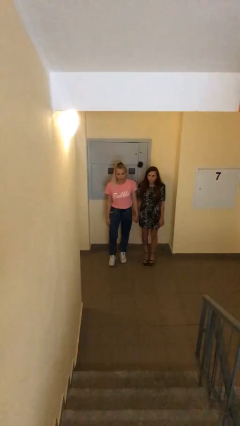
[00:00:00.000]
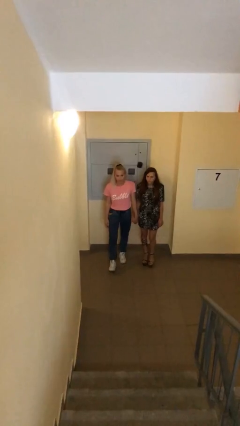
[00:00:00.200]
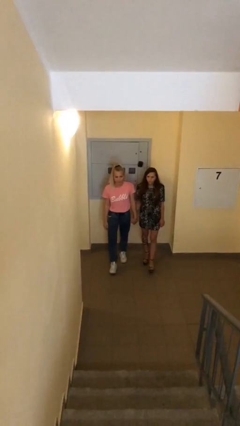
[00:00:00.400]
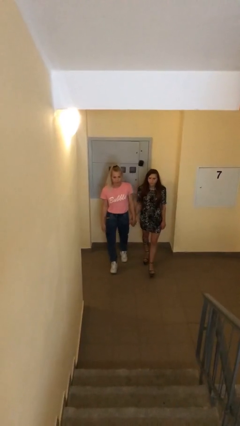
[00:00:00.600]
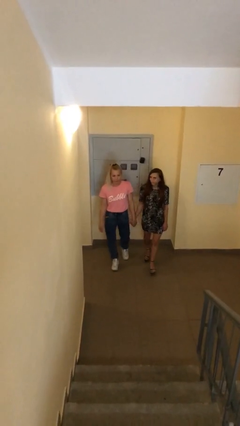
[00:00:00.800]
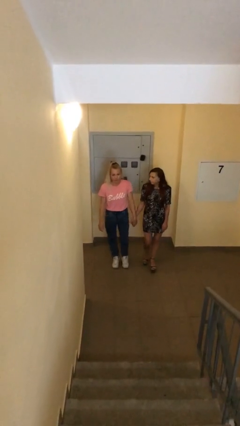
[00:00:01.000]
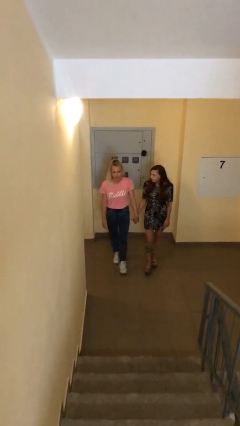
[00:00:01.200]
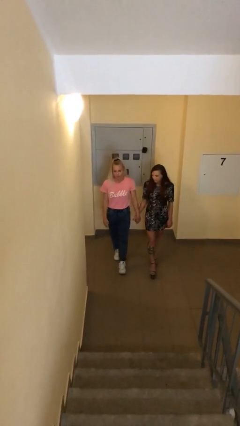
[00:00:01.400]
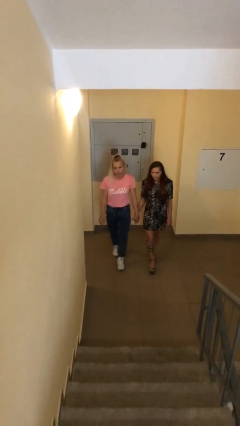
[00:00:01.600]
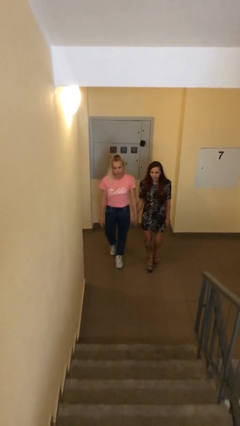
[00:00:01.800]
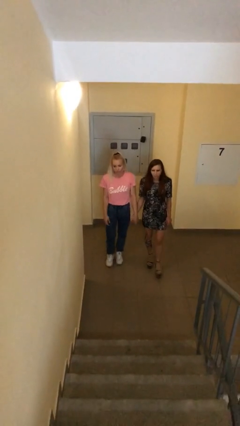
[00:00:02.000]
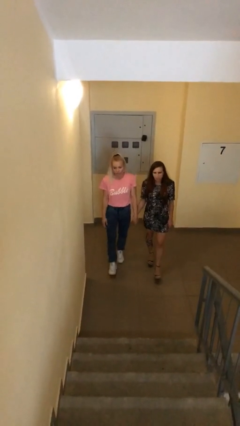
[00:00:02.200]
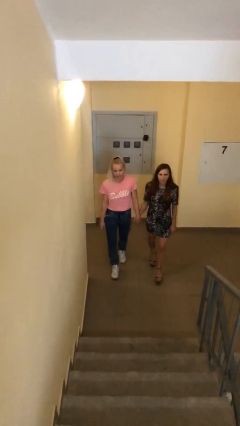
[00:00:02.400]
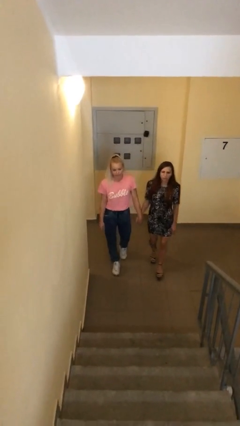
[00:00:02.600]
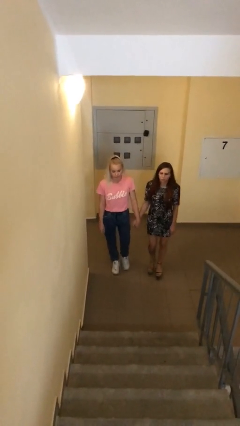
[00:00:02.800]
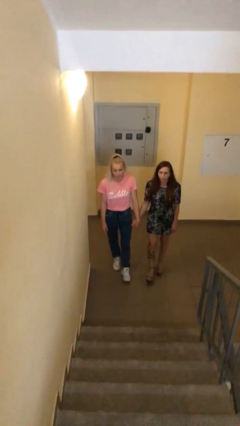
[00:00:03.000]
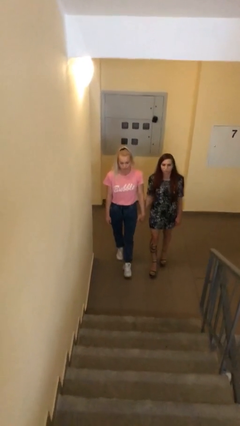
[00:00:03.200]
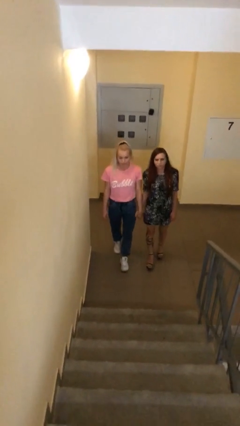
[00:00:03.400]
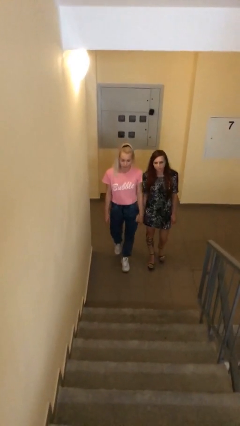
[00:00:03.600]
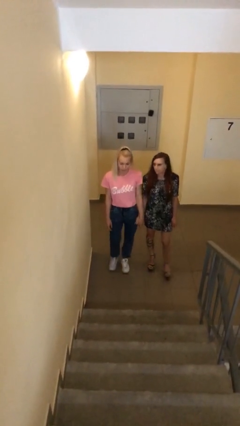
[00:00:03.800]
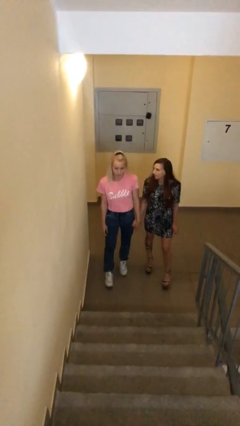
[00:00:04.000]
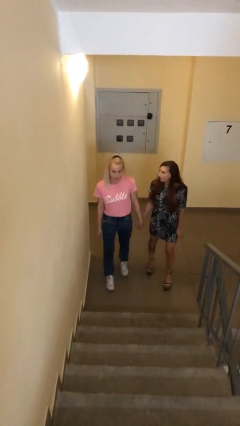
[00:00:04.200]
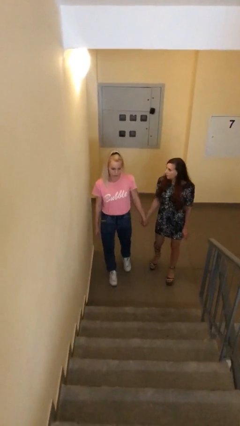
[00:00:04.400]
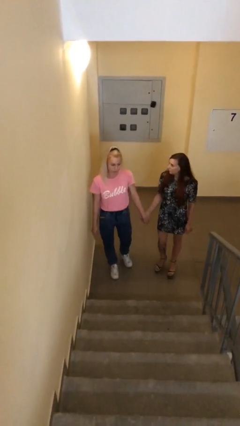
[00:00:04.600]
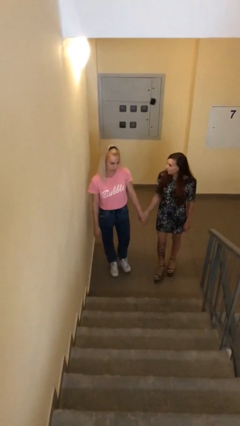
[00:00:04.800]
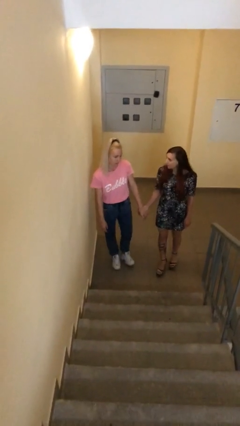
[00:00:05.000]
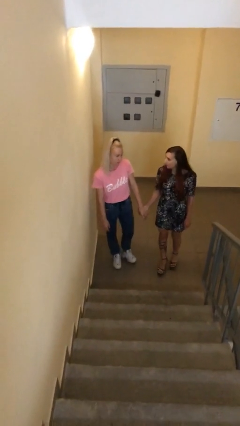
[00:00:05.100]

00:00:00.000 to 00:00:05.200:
person holds hand

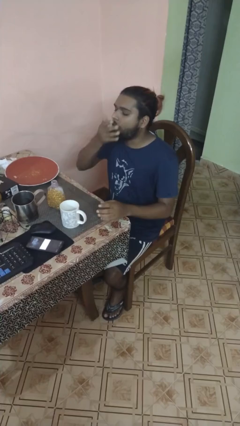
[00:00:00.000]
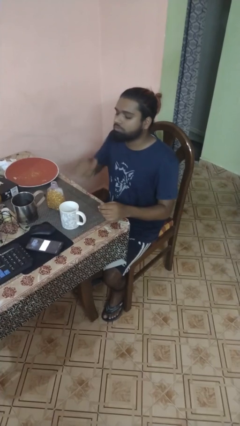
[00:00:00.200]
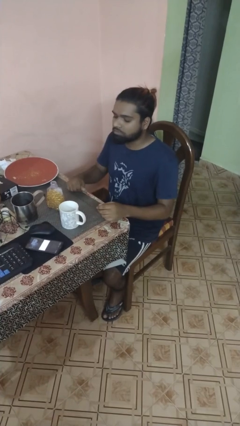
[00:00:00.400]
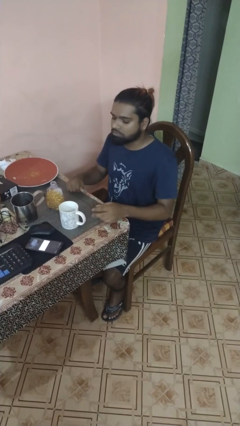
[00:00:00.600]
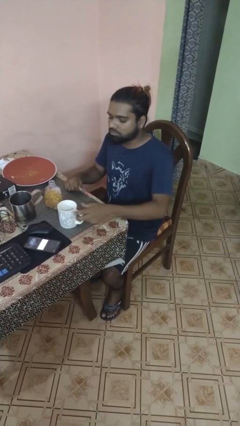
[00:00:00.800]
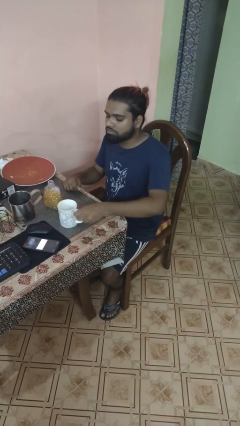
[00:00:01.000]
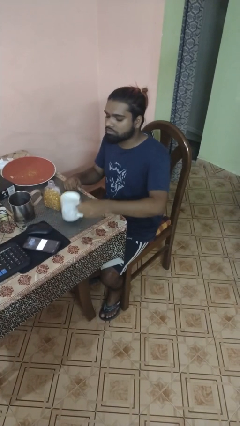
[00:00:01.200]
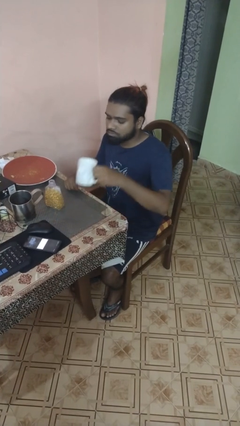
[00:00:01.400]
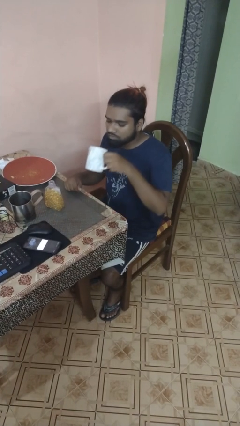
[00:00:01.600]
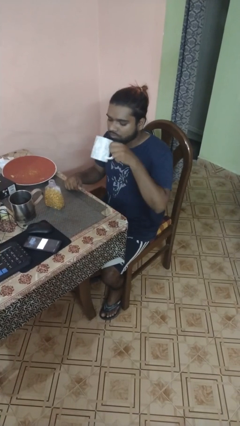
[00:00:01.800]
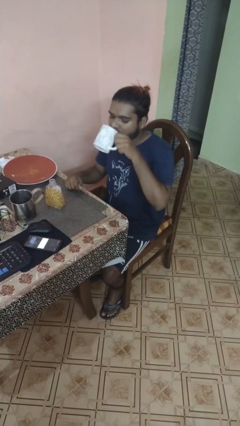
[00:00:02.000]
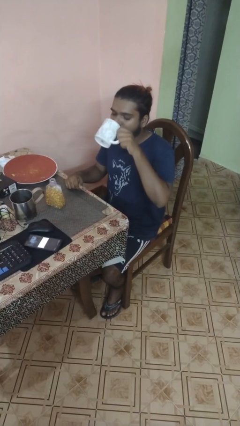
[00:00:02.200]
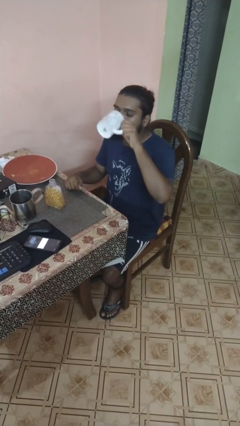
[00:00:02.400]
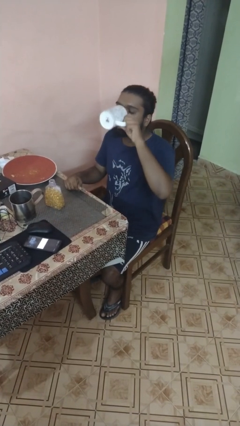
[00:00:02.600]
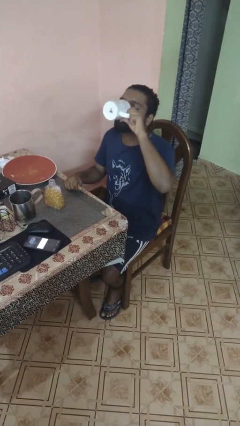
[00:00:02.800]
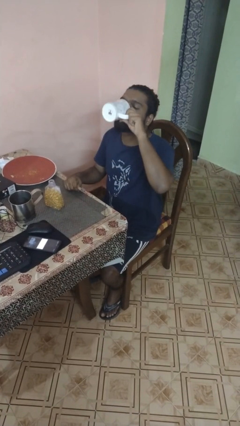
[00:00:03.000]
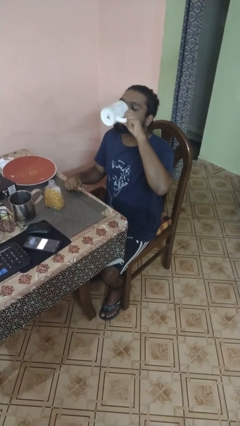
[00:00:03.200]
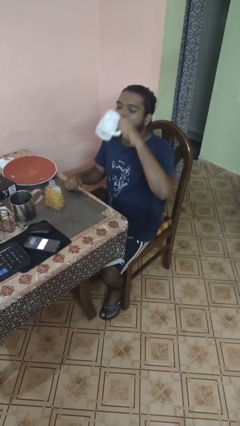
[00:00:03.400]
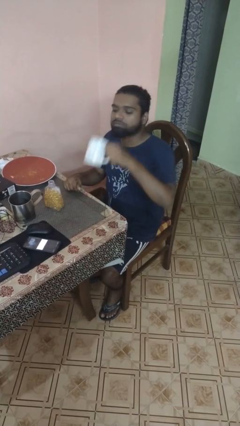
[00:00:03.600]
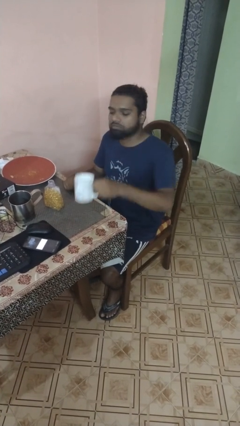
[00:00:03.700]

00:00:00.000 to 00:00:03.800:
person drinks from cup

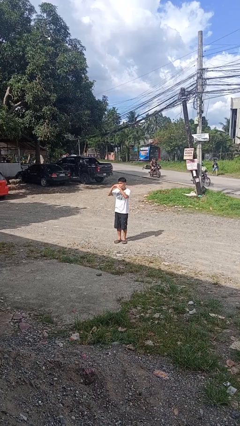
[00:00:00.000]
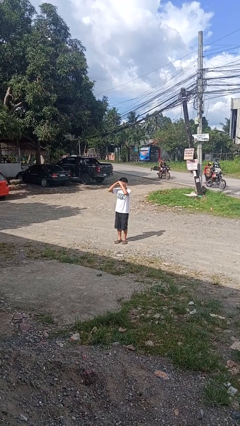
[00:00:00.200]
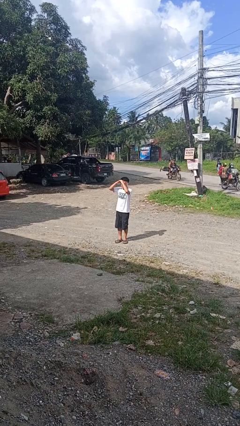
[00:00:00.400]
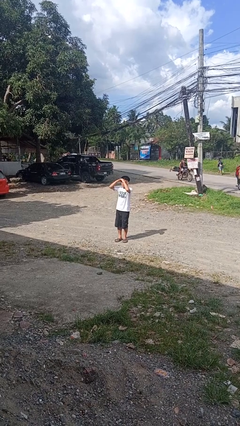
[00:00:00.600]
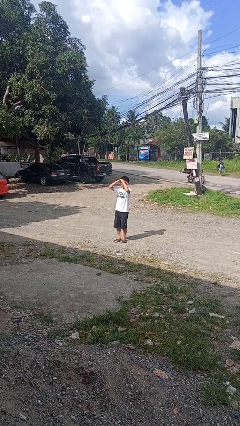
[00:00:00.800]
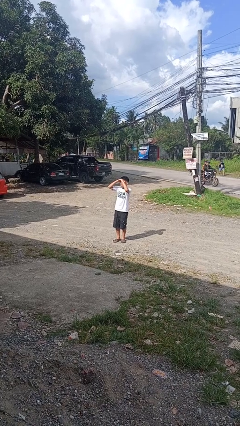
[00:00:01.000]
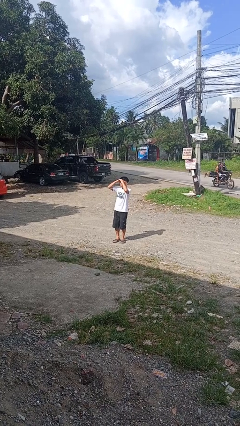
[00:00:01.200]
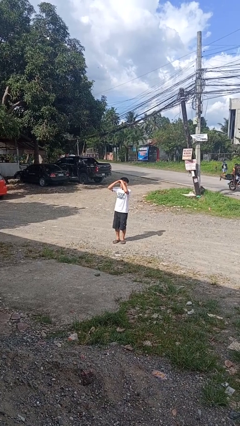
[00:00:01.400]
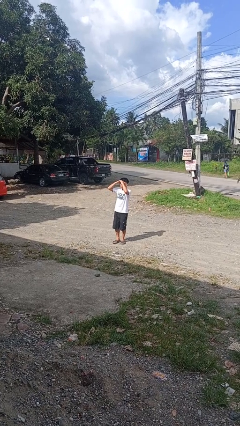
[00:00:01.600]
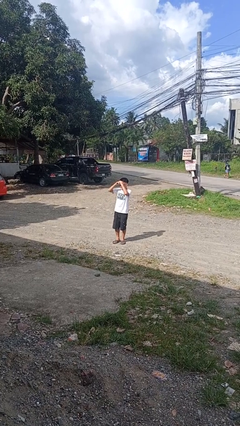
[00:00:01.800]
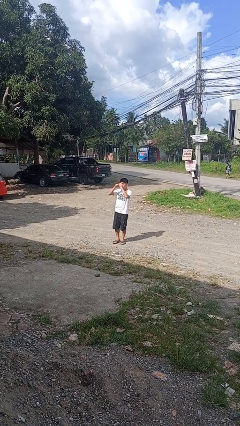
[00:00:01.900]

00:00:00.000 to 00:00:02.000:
person shades eyes

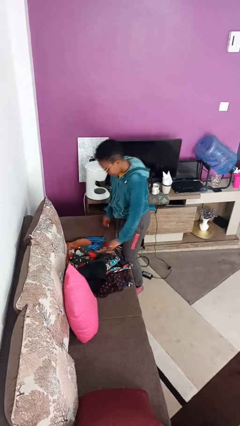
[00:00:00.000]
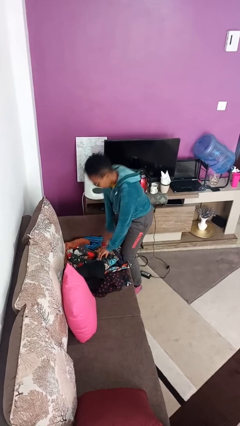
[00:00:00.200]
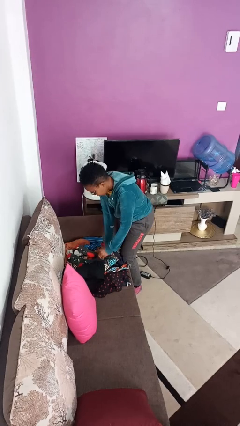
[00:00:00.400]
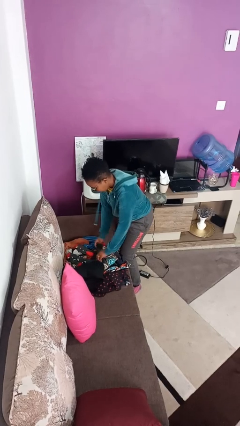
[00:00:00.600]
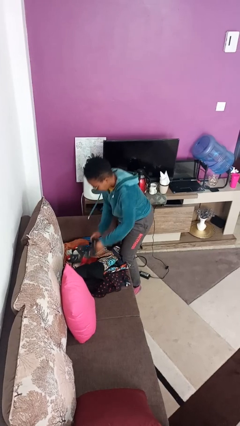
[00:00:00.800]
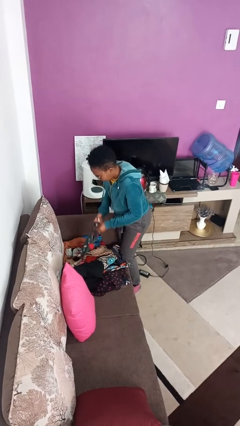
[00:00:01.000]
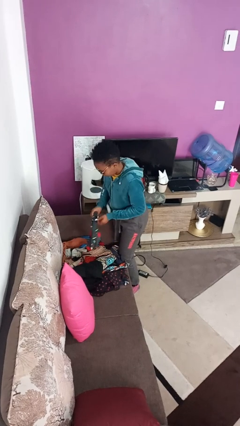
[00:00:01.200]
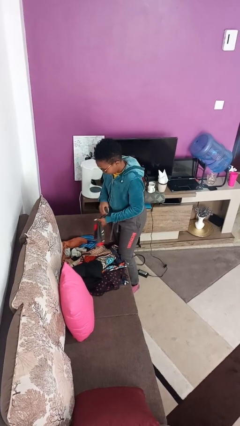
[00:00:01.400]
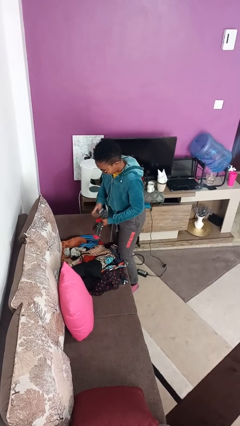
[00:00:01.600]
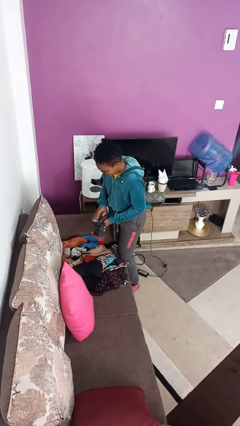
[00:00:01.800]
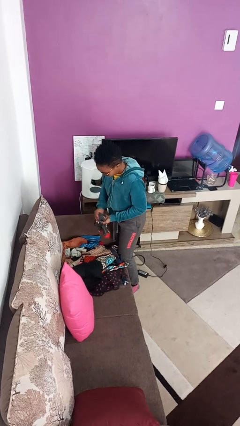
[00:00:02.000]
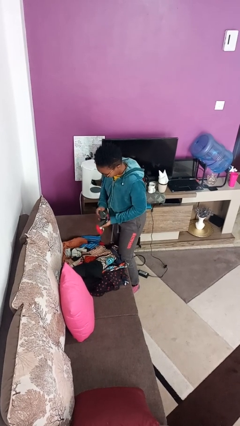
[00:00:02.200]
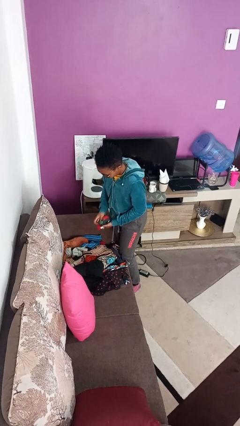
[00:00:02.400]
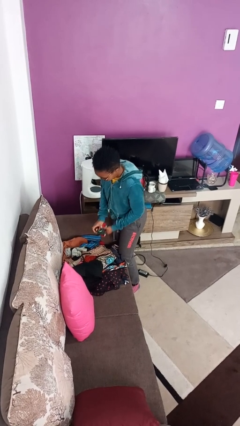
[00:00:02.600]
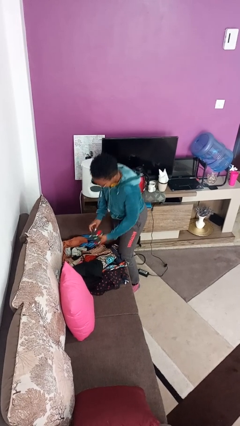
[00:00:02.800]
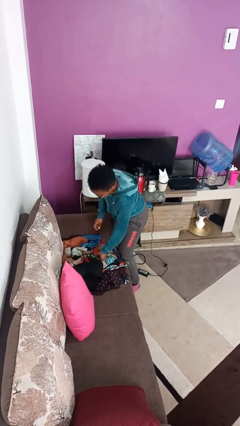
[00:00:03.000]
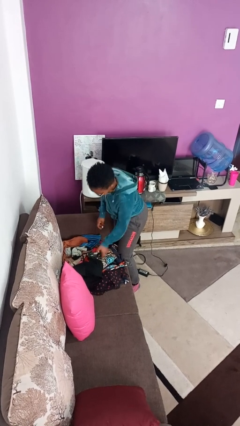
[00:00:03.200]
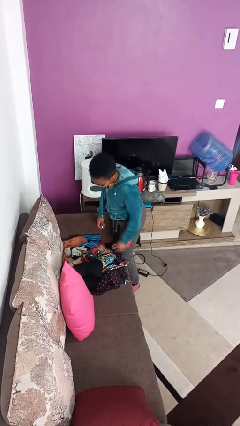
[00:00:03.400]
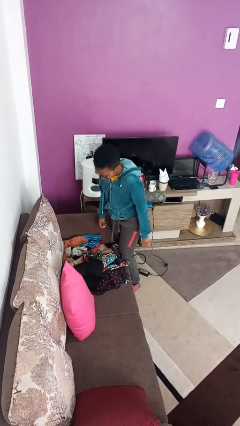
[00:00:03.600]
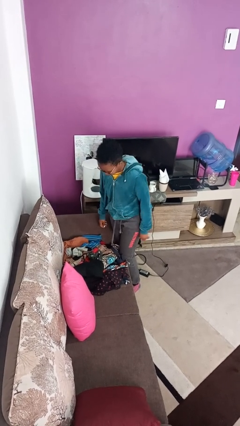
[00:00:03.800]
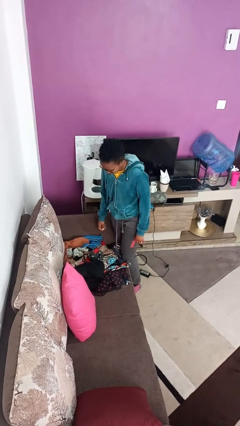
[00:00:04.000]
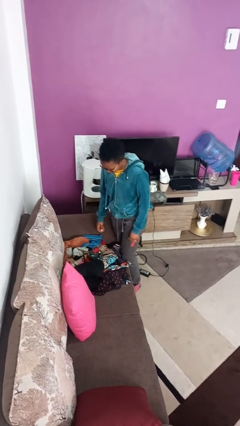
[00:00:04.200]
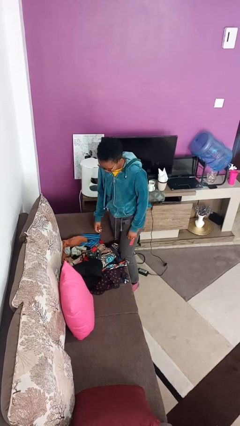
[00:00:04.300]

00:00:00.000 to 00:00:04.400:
person folds socks

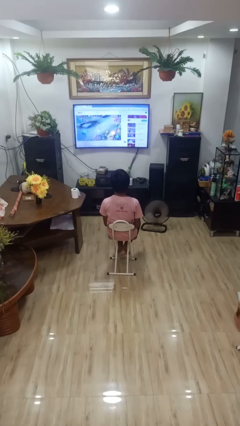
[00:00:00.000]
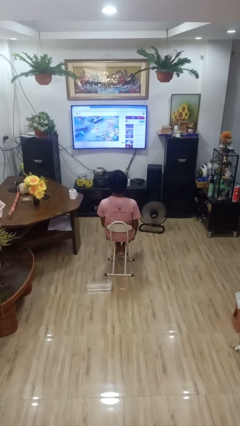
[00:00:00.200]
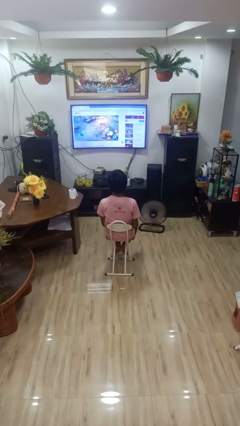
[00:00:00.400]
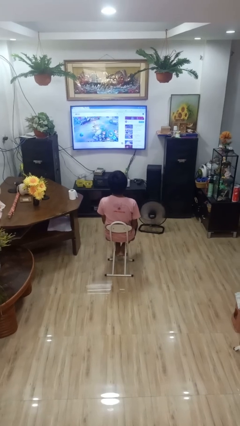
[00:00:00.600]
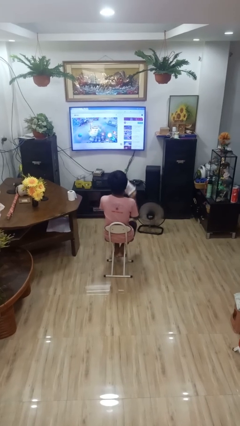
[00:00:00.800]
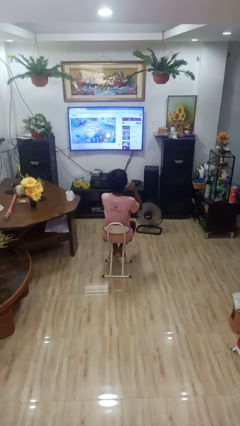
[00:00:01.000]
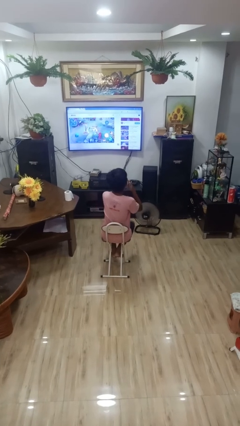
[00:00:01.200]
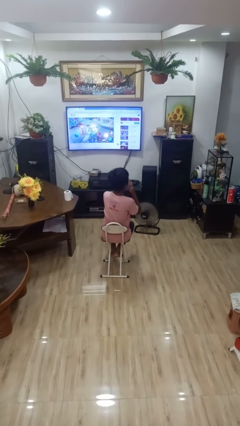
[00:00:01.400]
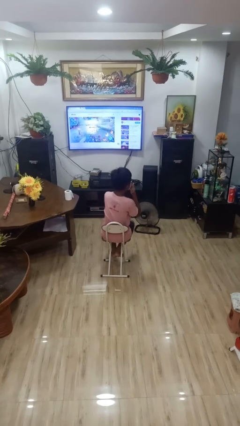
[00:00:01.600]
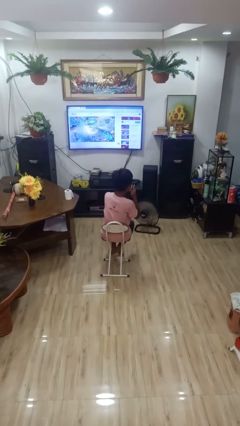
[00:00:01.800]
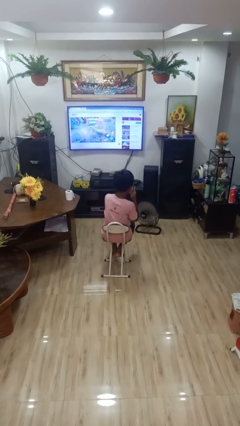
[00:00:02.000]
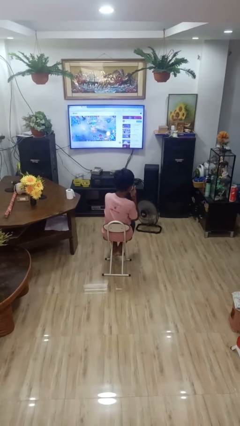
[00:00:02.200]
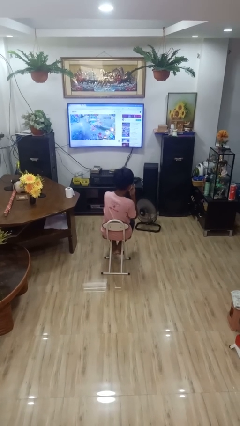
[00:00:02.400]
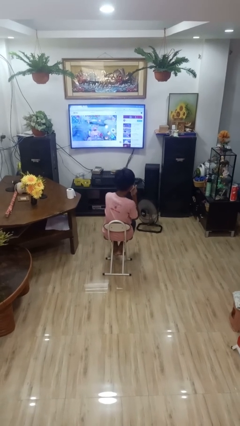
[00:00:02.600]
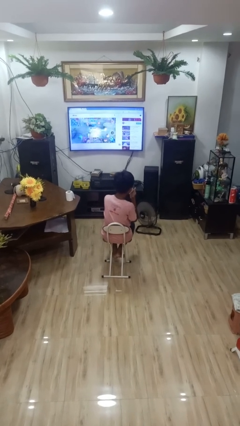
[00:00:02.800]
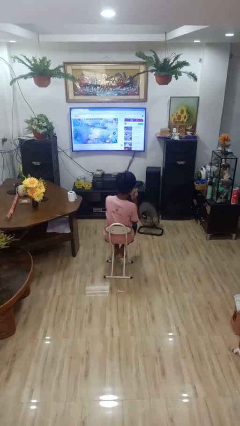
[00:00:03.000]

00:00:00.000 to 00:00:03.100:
person blows nose
